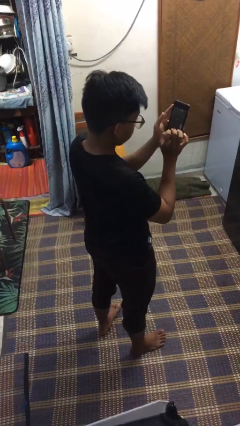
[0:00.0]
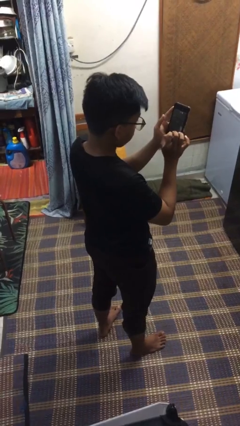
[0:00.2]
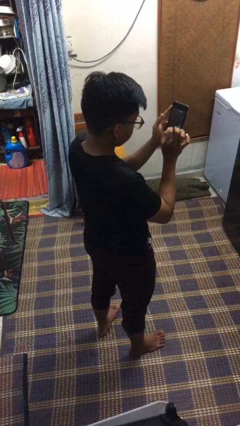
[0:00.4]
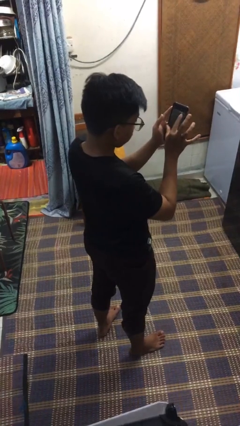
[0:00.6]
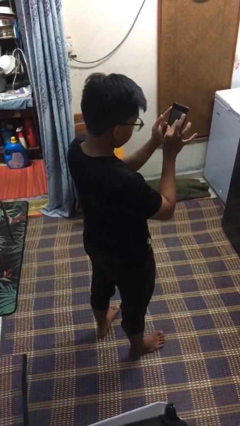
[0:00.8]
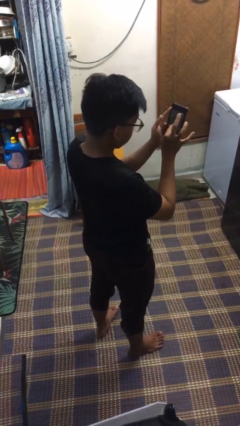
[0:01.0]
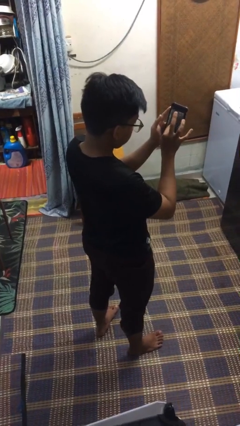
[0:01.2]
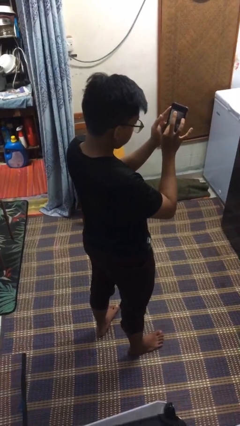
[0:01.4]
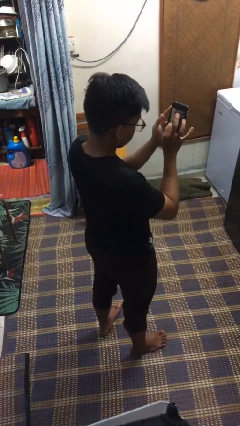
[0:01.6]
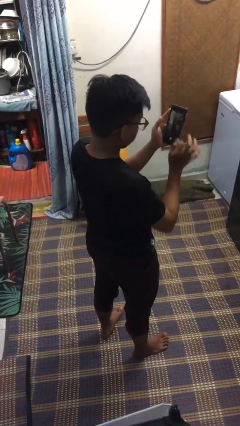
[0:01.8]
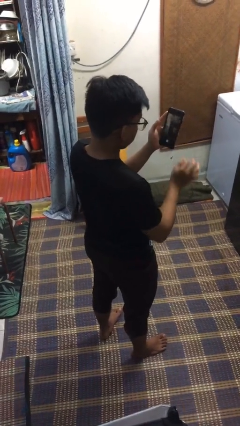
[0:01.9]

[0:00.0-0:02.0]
person gestures zoom out

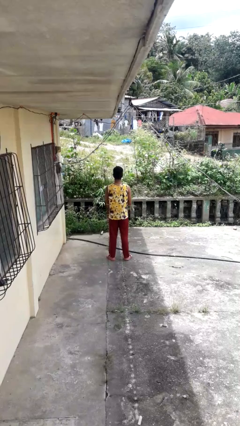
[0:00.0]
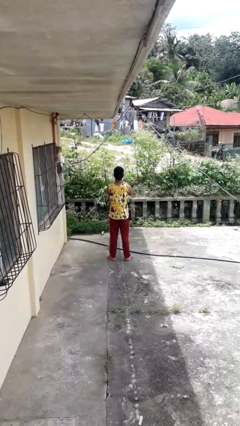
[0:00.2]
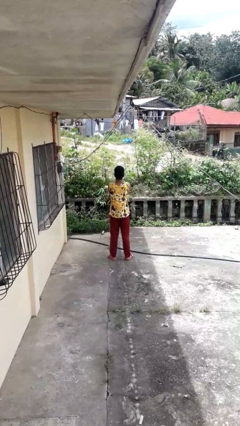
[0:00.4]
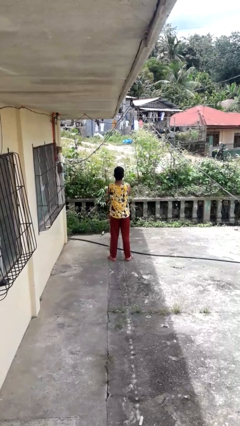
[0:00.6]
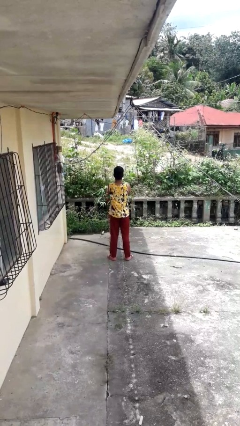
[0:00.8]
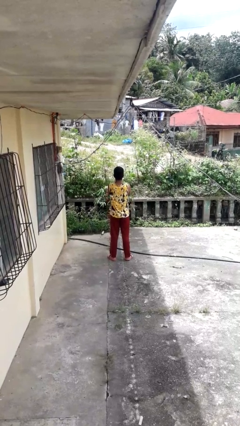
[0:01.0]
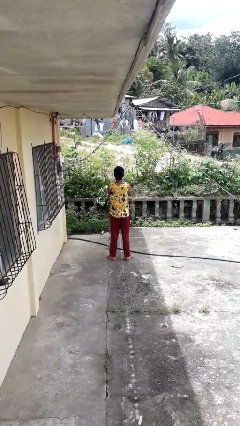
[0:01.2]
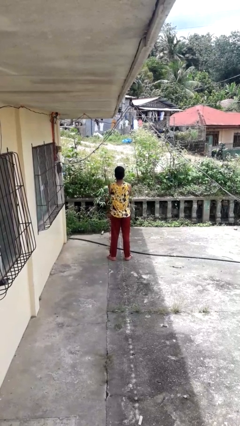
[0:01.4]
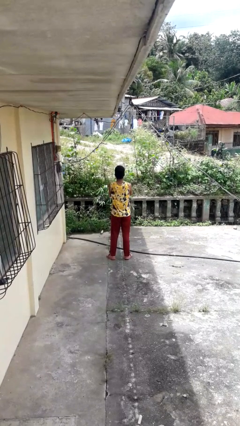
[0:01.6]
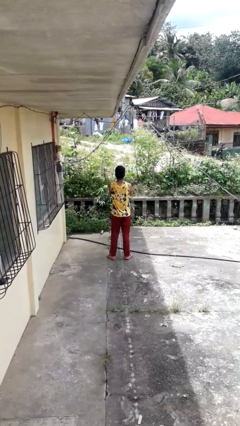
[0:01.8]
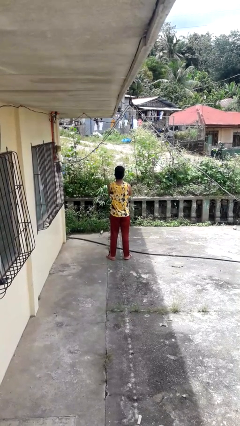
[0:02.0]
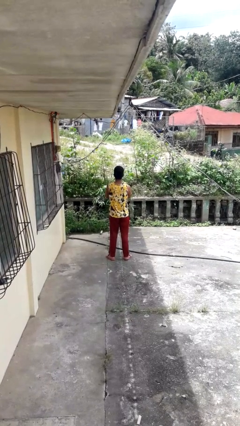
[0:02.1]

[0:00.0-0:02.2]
person crosses arms

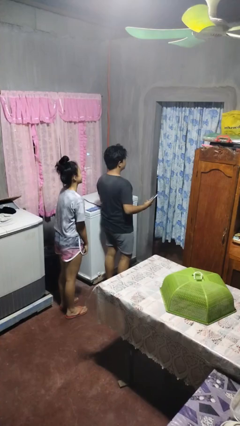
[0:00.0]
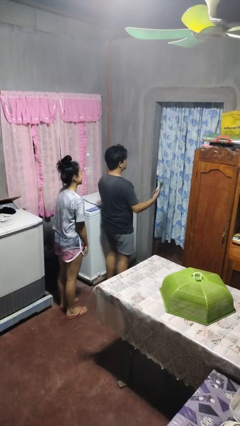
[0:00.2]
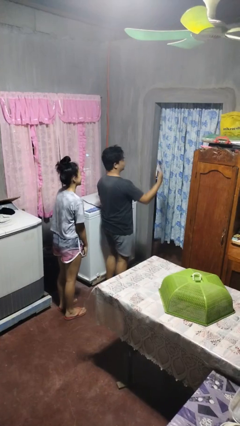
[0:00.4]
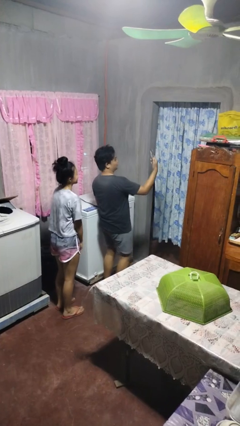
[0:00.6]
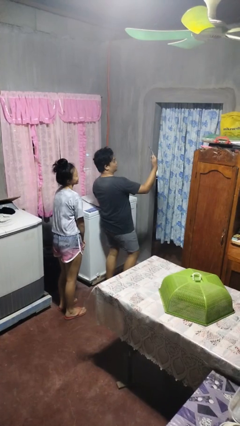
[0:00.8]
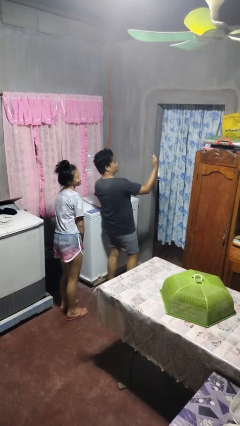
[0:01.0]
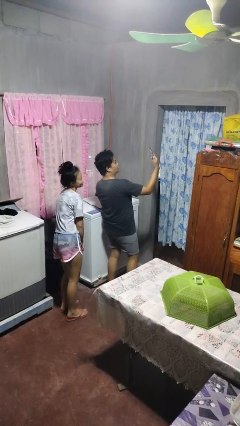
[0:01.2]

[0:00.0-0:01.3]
person takes selfie with person

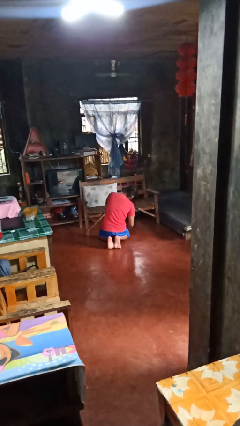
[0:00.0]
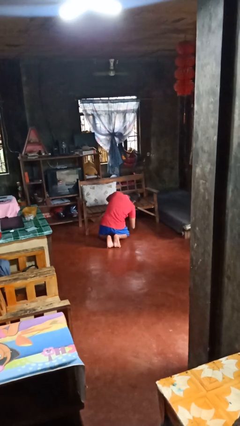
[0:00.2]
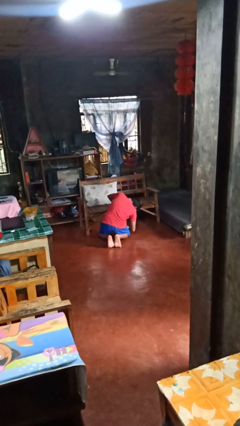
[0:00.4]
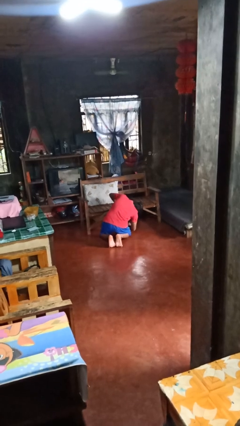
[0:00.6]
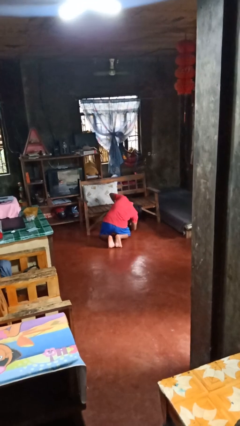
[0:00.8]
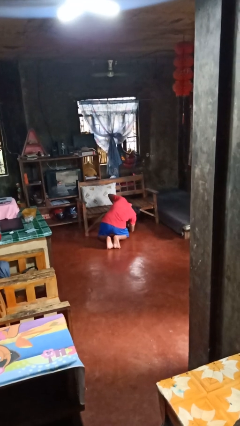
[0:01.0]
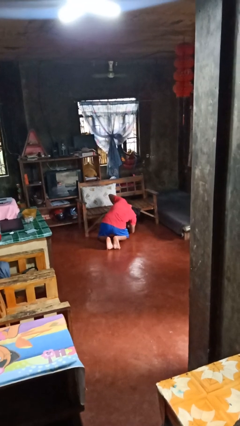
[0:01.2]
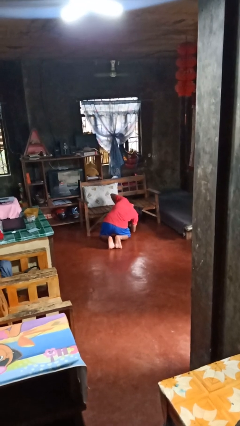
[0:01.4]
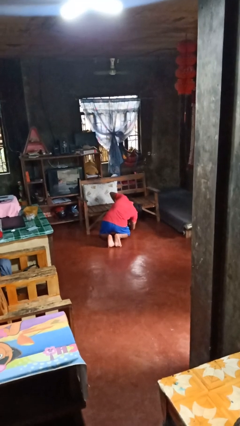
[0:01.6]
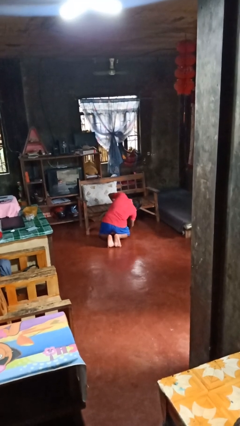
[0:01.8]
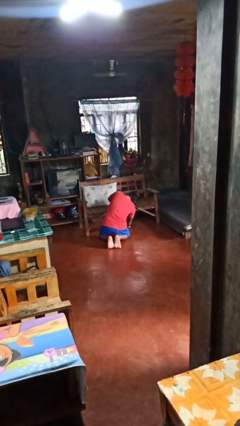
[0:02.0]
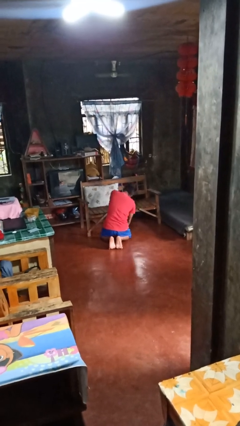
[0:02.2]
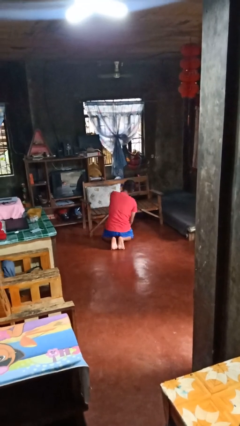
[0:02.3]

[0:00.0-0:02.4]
person searches under couch

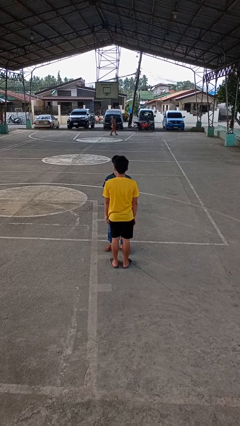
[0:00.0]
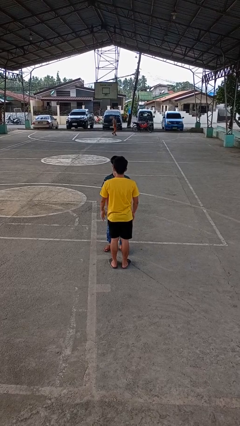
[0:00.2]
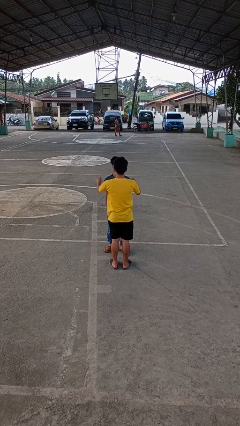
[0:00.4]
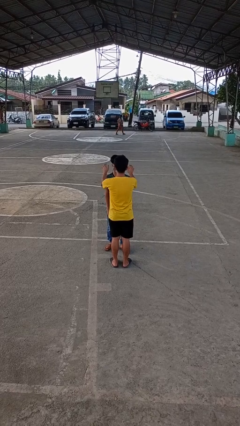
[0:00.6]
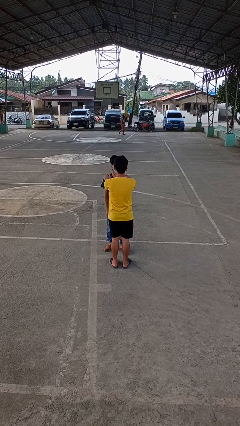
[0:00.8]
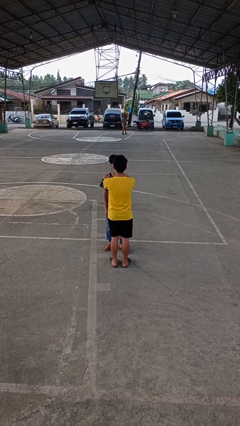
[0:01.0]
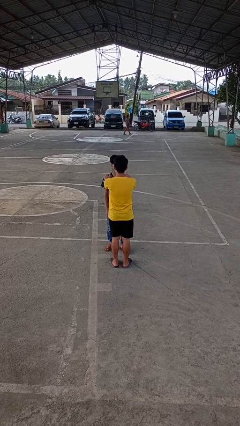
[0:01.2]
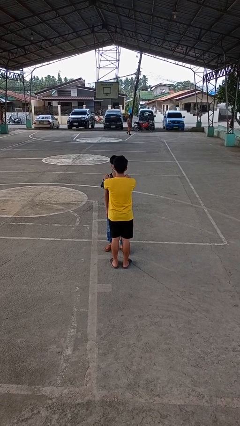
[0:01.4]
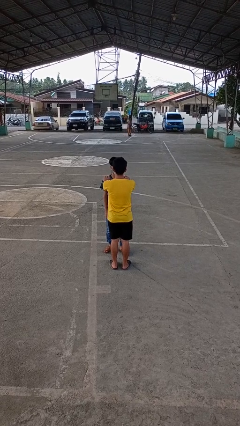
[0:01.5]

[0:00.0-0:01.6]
person grabs person by shoulder

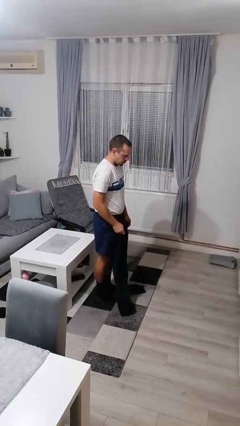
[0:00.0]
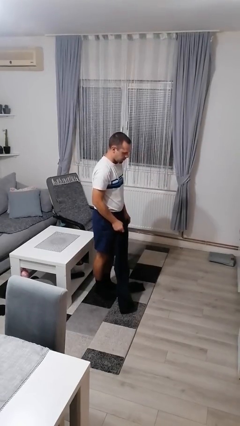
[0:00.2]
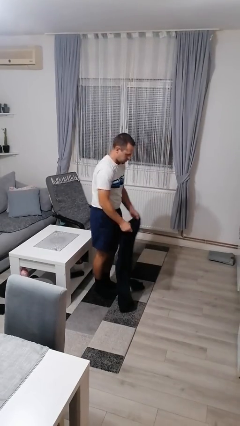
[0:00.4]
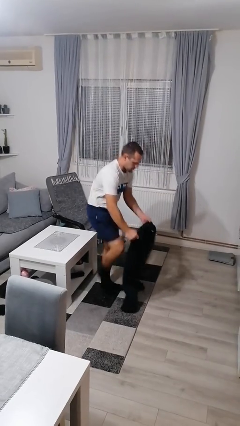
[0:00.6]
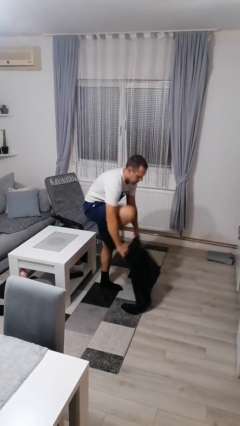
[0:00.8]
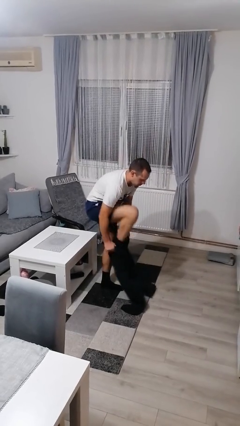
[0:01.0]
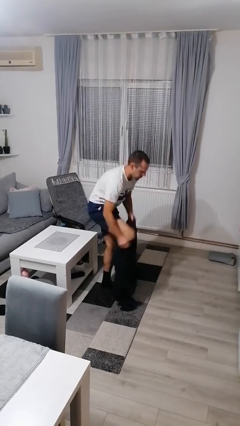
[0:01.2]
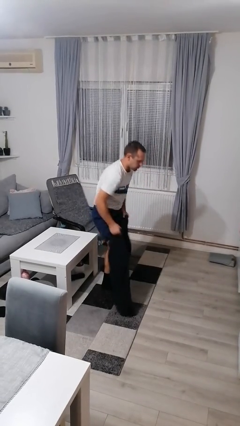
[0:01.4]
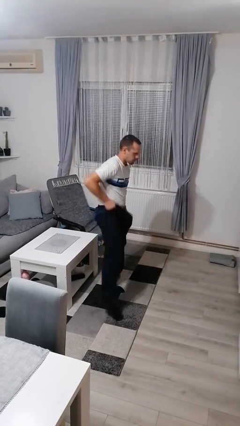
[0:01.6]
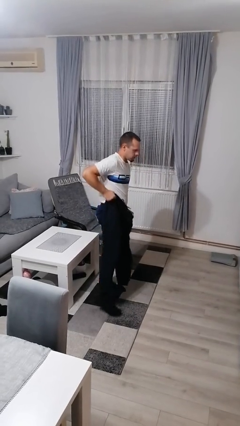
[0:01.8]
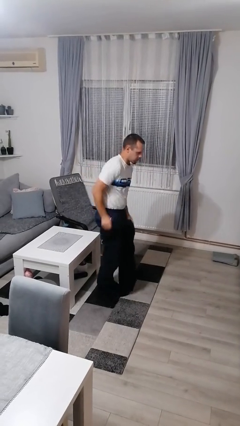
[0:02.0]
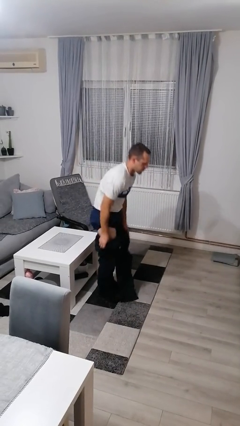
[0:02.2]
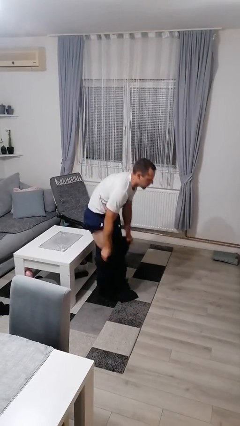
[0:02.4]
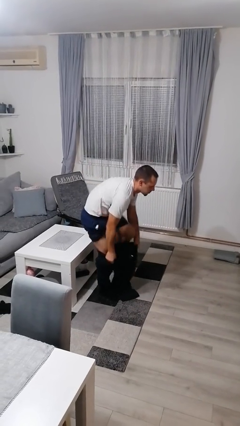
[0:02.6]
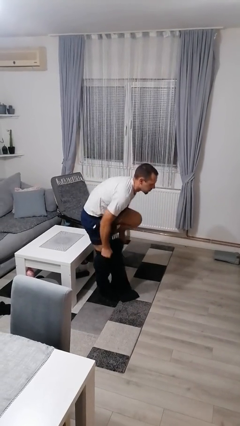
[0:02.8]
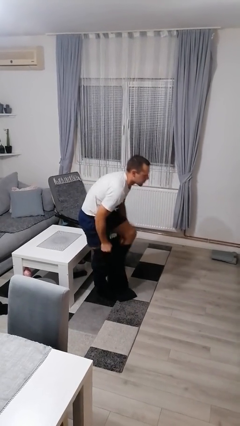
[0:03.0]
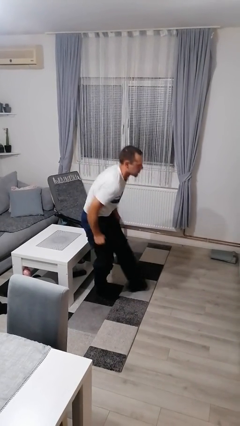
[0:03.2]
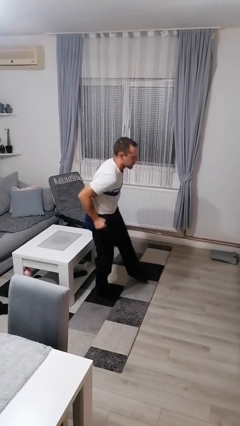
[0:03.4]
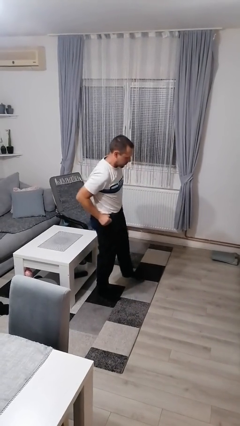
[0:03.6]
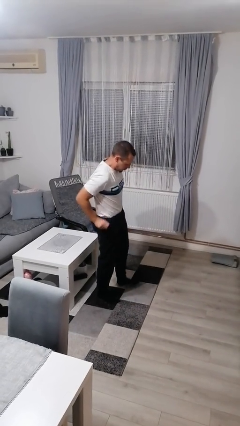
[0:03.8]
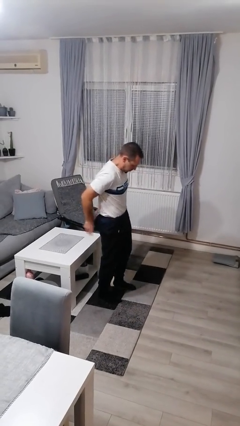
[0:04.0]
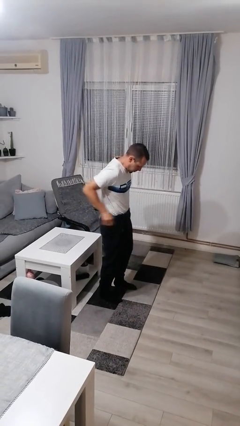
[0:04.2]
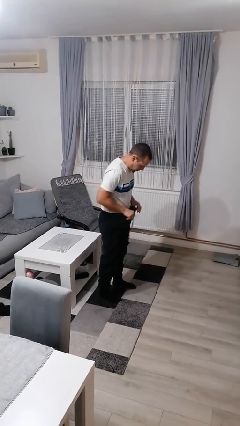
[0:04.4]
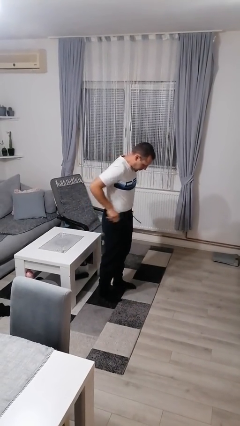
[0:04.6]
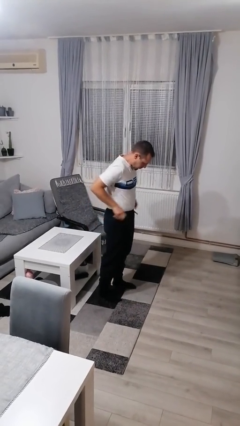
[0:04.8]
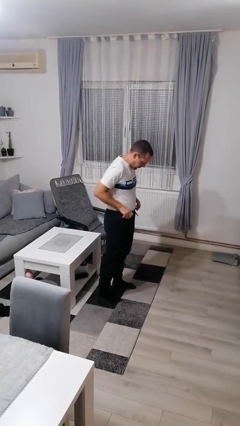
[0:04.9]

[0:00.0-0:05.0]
person takes off pants

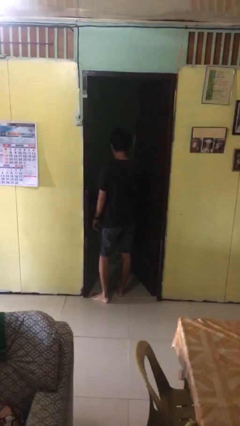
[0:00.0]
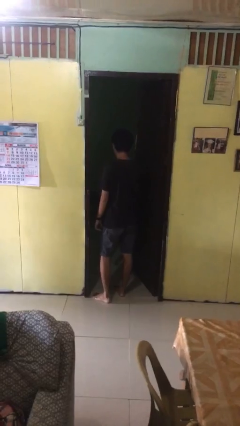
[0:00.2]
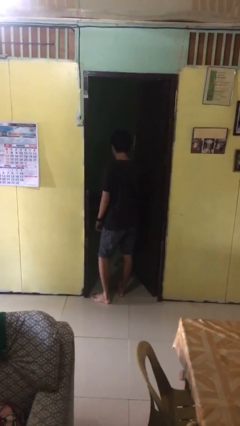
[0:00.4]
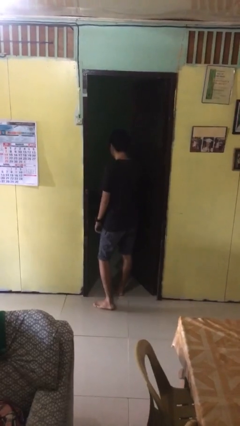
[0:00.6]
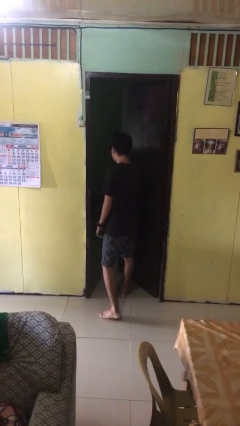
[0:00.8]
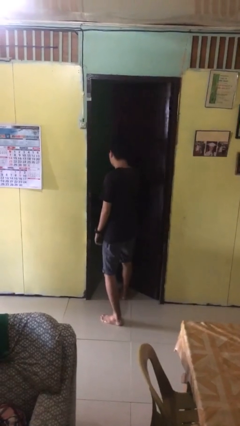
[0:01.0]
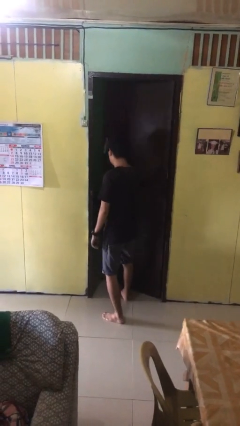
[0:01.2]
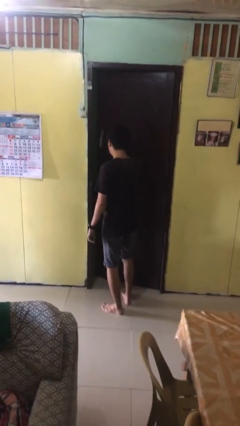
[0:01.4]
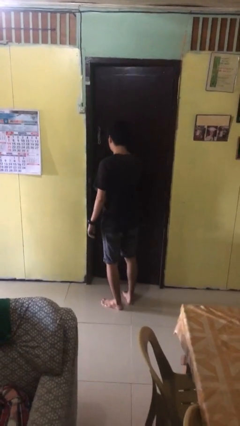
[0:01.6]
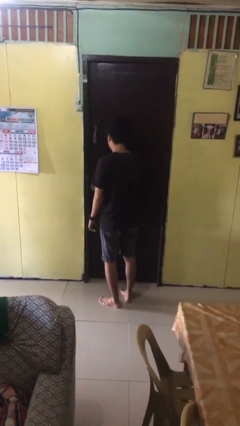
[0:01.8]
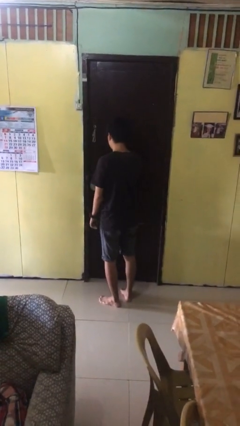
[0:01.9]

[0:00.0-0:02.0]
person closes facility door

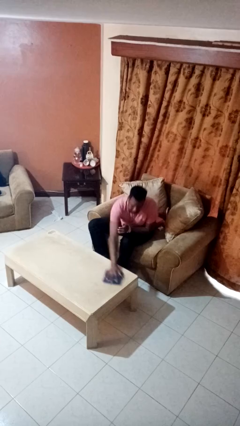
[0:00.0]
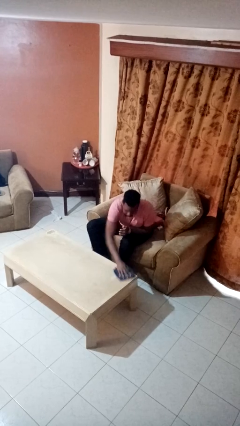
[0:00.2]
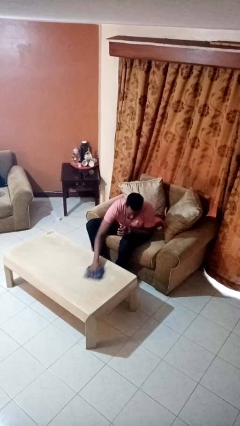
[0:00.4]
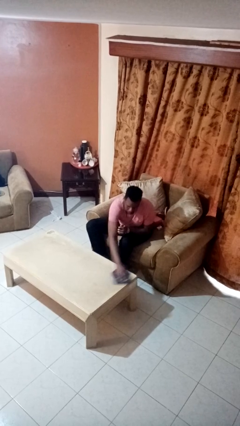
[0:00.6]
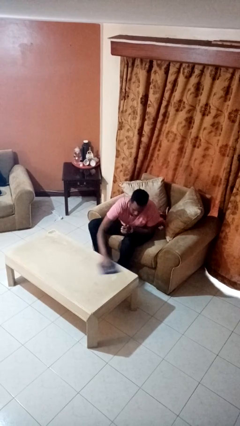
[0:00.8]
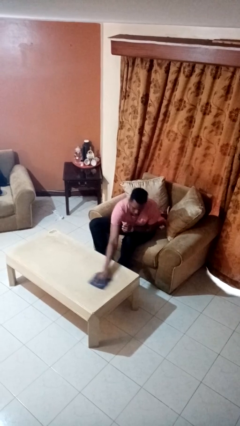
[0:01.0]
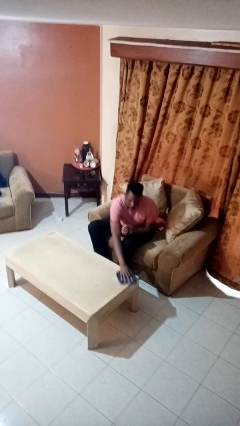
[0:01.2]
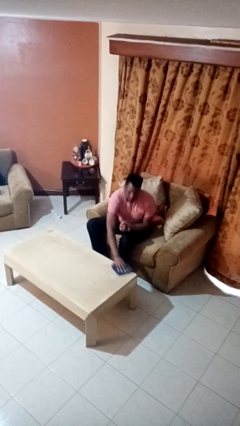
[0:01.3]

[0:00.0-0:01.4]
person cleans table with rag
